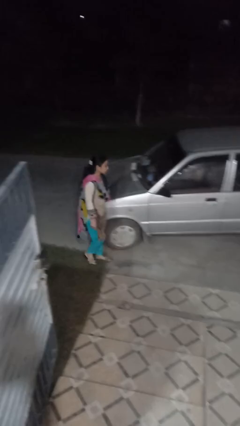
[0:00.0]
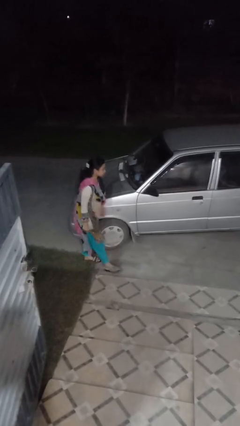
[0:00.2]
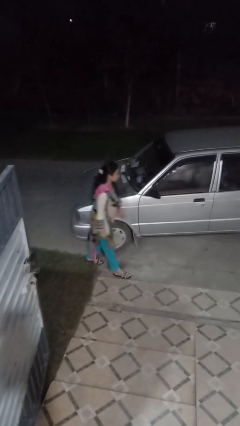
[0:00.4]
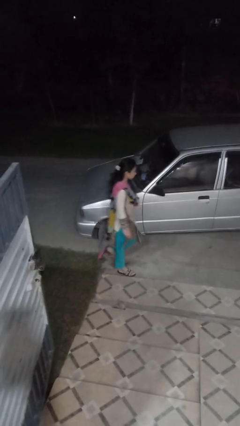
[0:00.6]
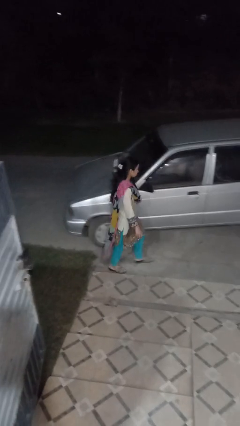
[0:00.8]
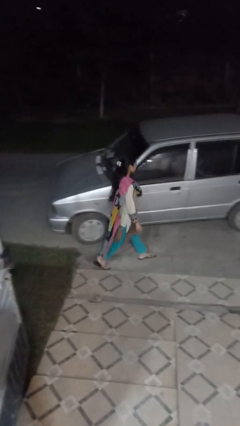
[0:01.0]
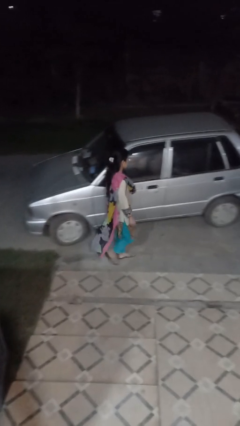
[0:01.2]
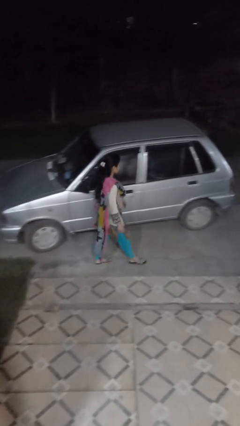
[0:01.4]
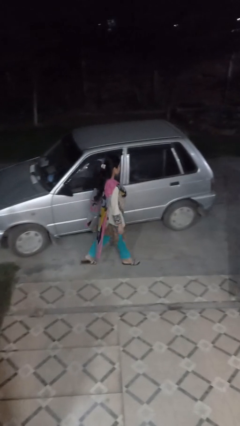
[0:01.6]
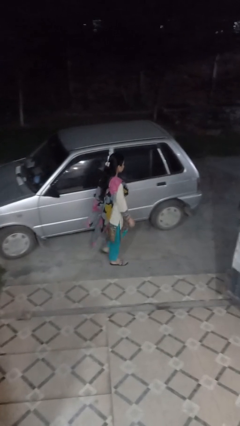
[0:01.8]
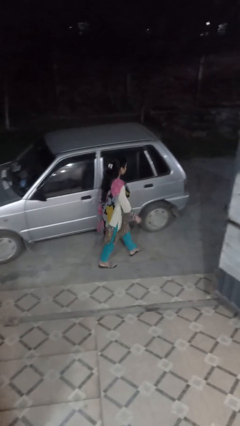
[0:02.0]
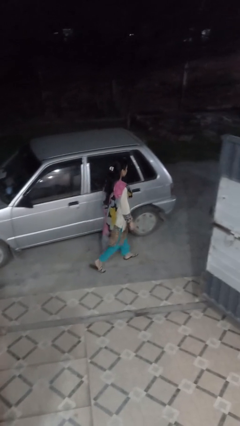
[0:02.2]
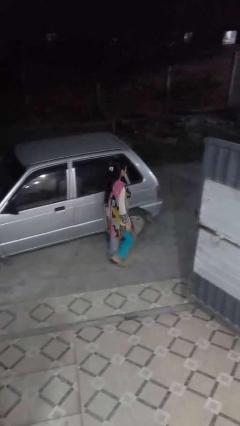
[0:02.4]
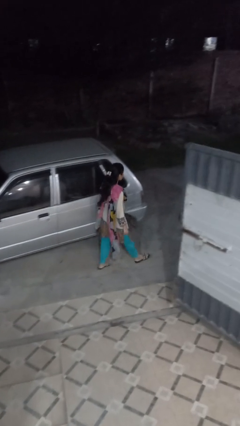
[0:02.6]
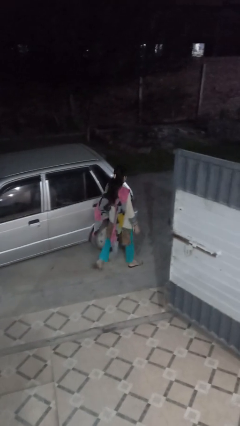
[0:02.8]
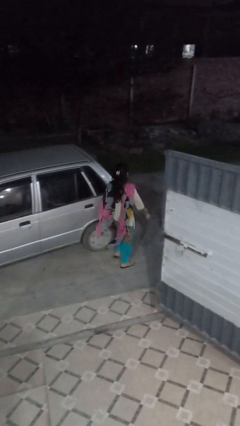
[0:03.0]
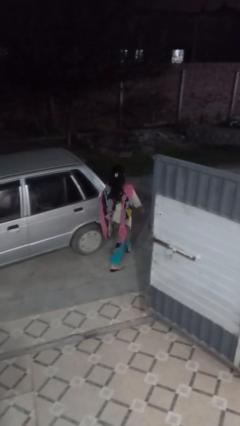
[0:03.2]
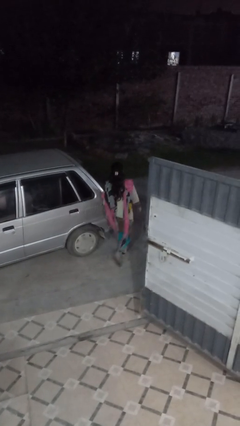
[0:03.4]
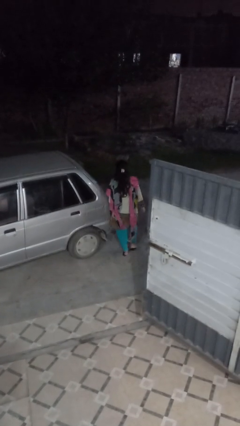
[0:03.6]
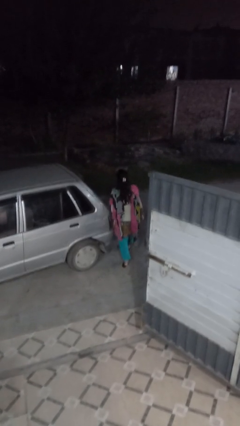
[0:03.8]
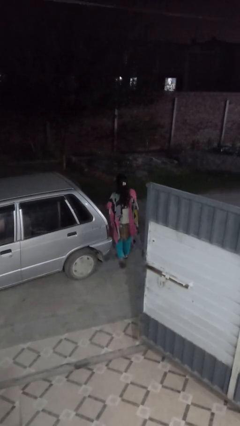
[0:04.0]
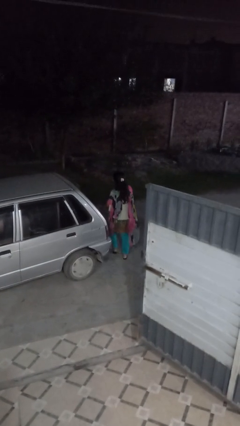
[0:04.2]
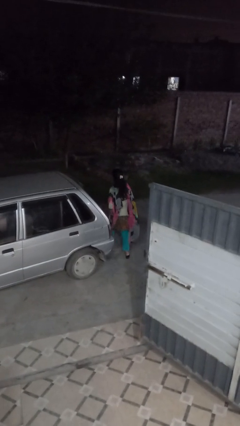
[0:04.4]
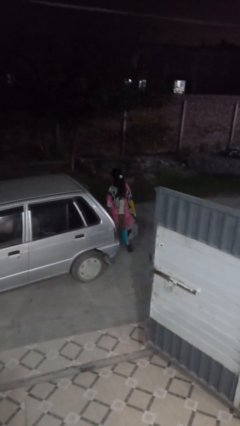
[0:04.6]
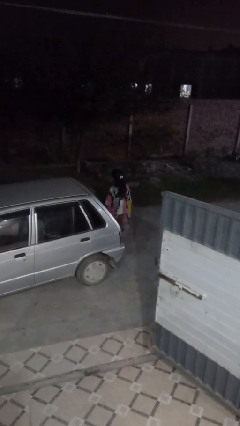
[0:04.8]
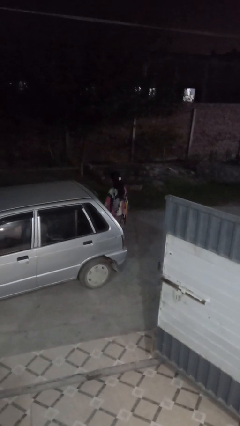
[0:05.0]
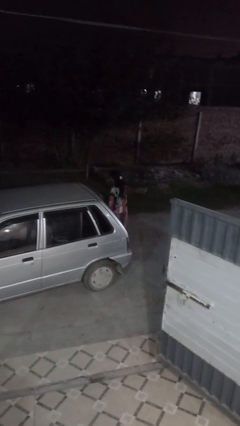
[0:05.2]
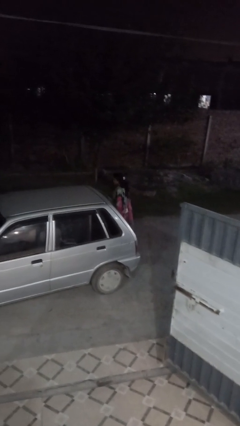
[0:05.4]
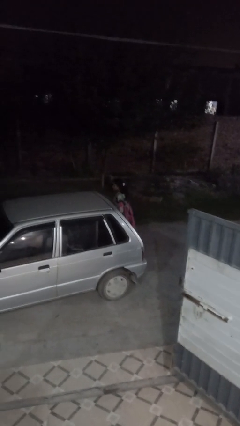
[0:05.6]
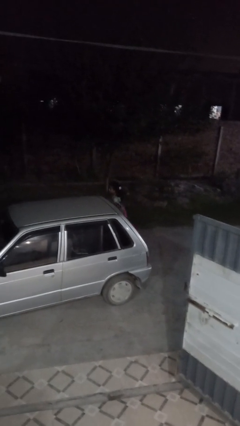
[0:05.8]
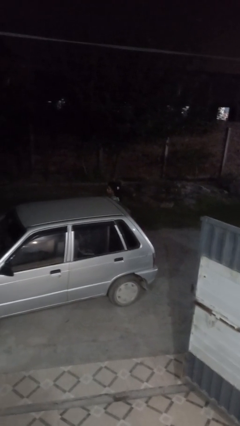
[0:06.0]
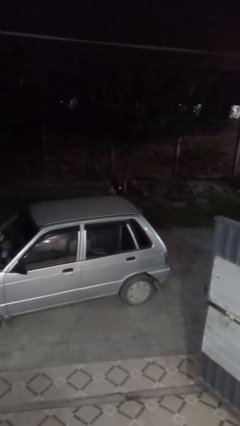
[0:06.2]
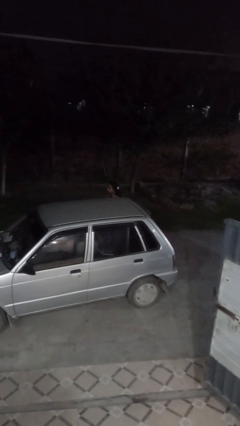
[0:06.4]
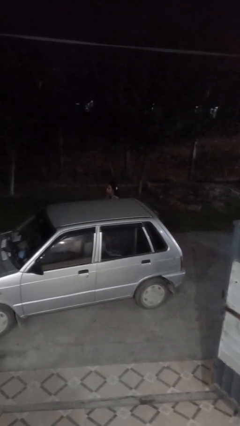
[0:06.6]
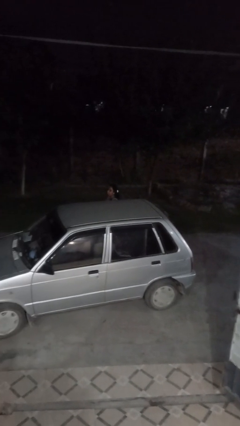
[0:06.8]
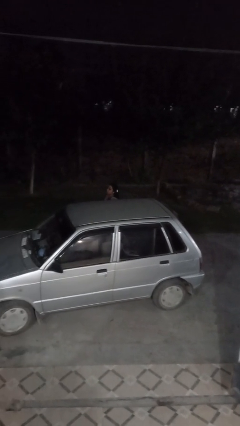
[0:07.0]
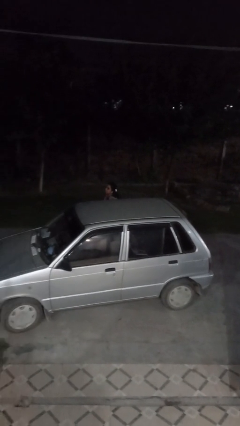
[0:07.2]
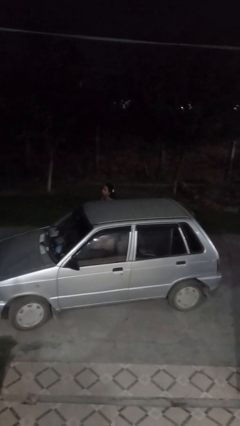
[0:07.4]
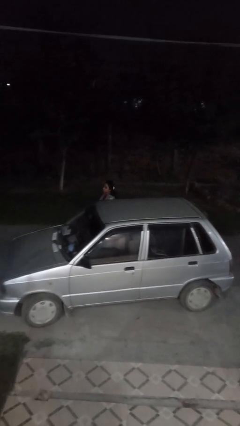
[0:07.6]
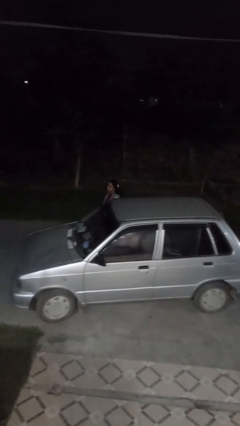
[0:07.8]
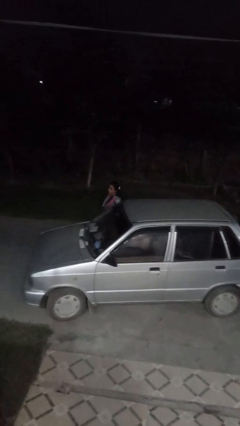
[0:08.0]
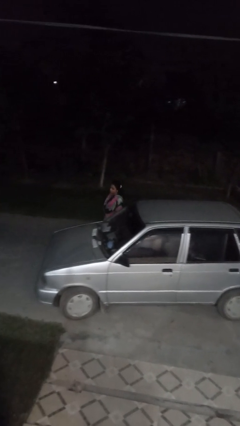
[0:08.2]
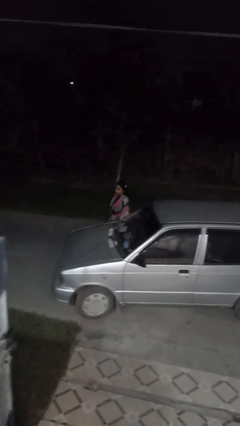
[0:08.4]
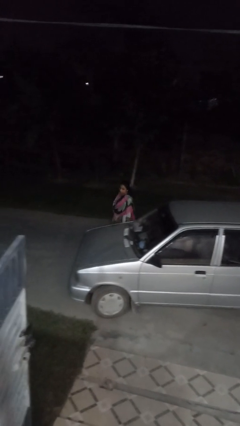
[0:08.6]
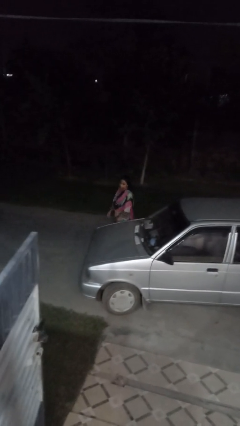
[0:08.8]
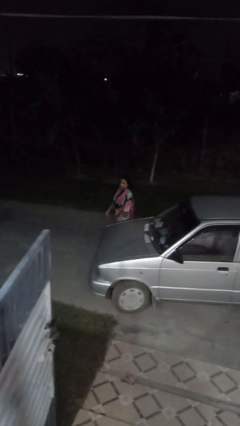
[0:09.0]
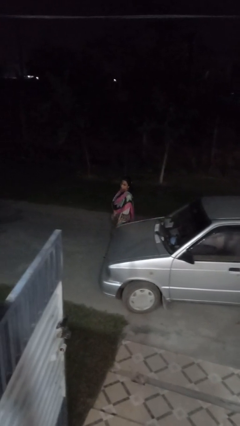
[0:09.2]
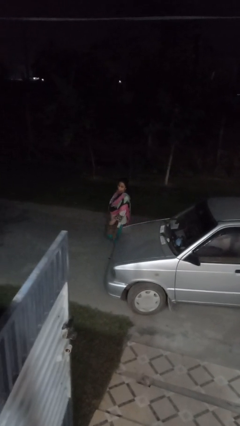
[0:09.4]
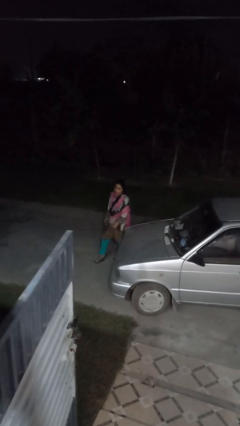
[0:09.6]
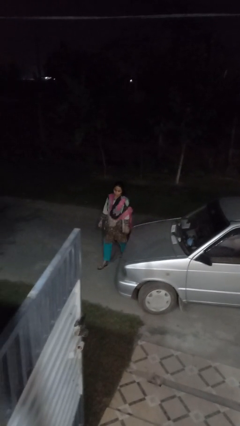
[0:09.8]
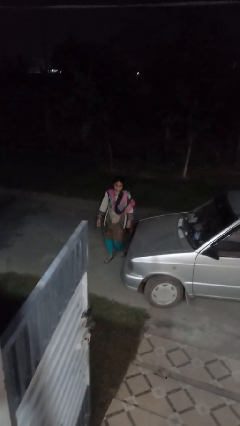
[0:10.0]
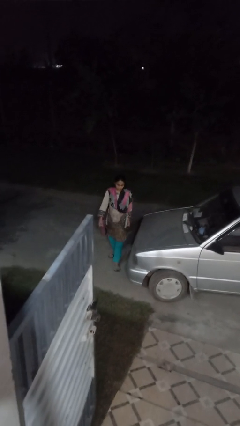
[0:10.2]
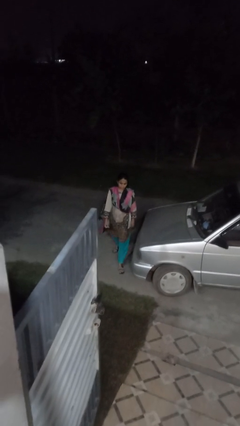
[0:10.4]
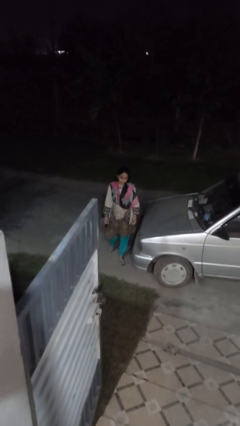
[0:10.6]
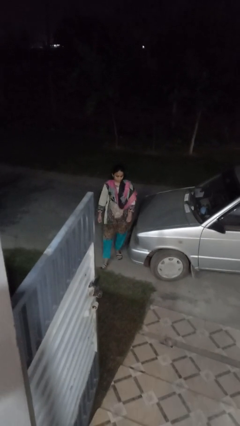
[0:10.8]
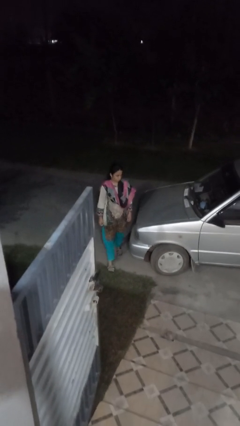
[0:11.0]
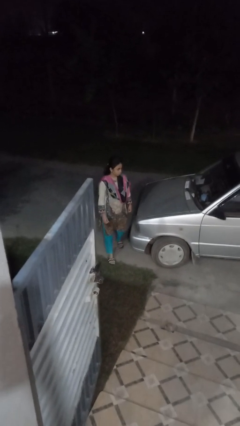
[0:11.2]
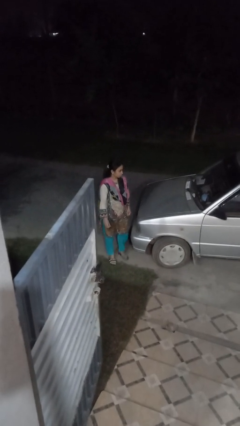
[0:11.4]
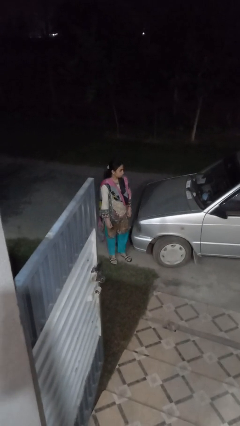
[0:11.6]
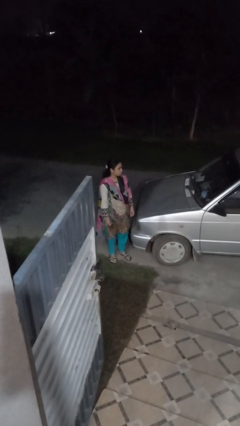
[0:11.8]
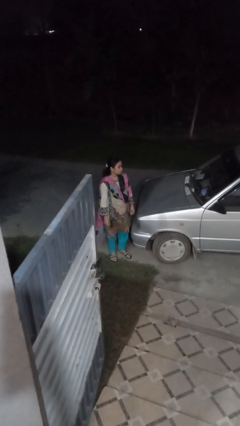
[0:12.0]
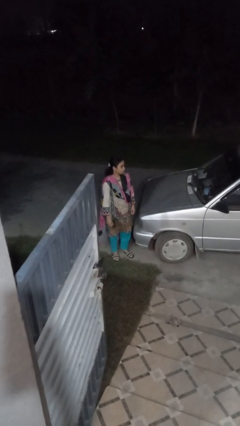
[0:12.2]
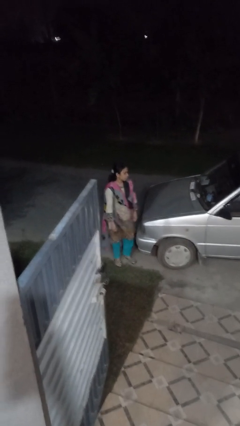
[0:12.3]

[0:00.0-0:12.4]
person walks around car

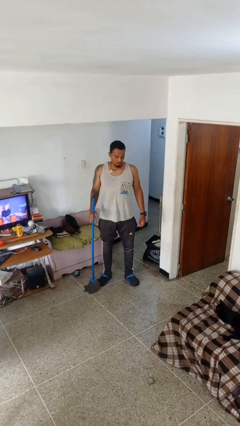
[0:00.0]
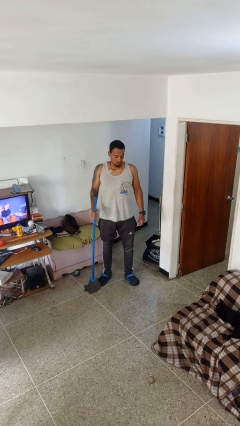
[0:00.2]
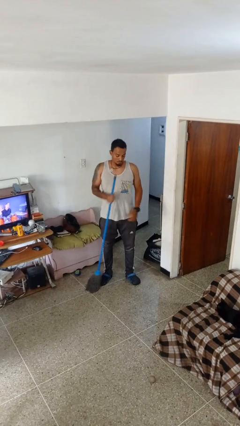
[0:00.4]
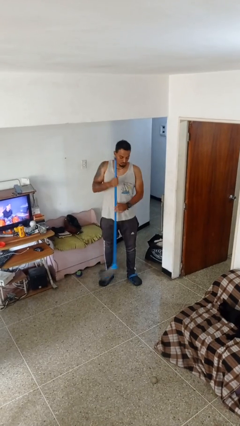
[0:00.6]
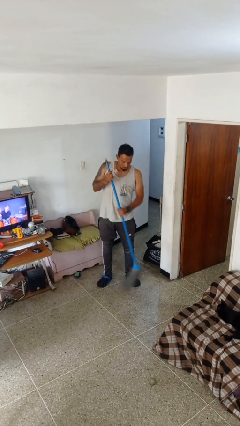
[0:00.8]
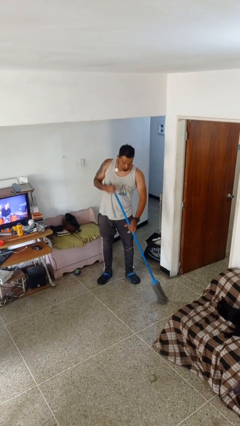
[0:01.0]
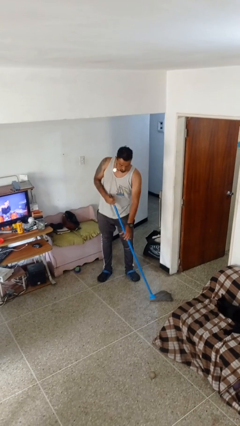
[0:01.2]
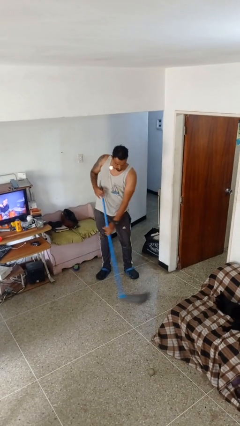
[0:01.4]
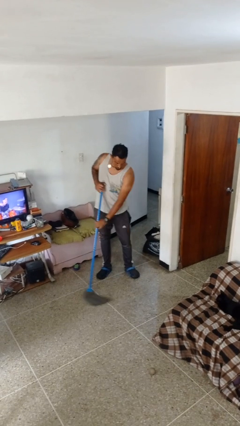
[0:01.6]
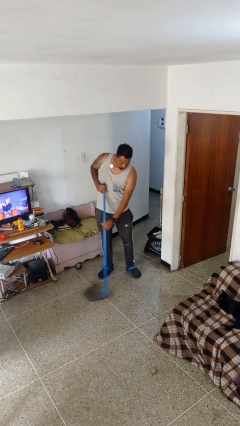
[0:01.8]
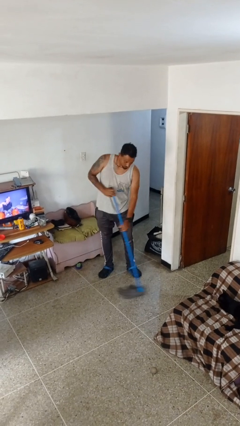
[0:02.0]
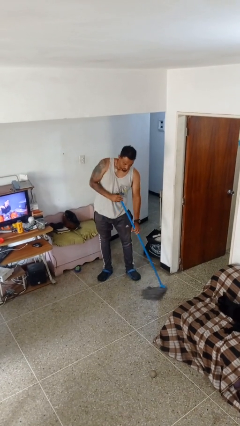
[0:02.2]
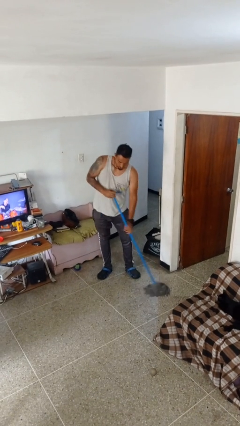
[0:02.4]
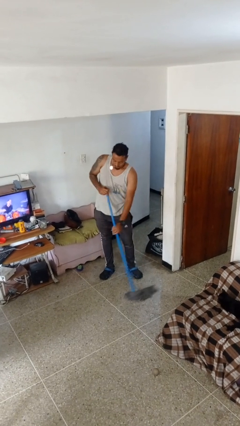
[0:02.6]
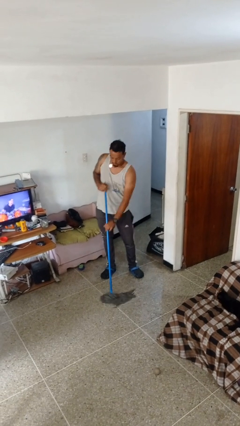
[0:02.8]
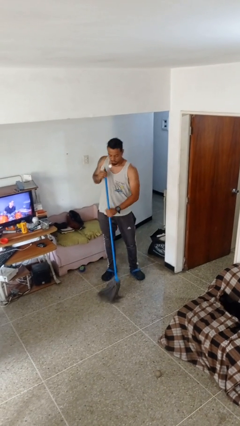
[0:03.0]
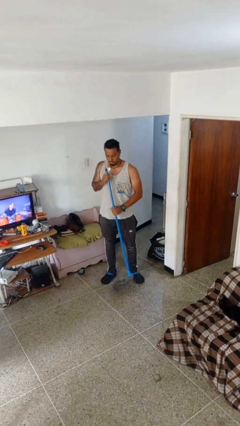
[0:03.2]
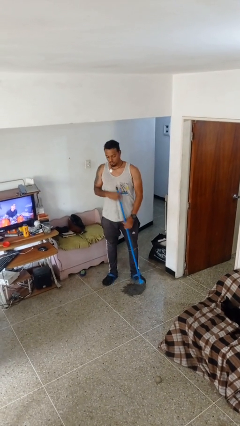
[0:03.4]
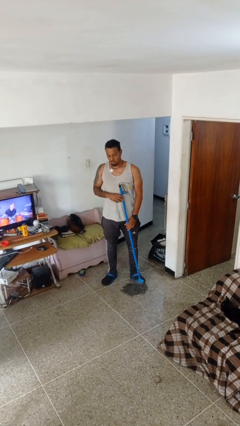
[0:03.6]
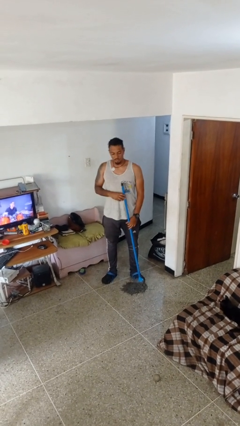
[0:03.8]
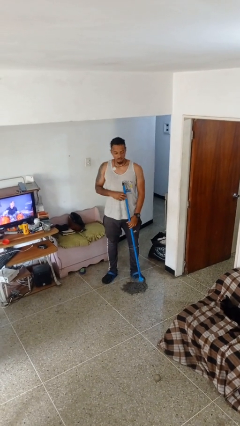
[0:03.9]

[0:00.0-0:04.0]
person mops

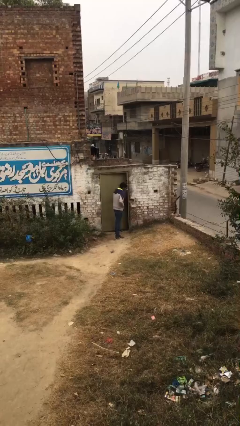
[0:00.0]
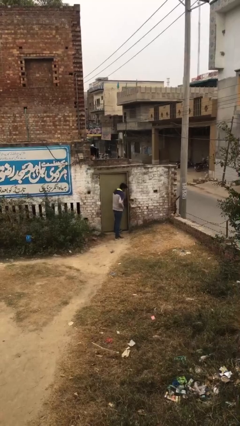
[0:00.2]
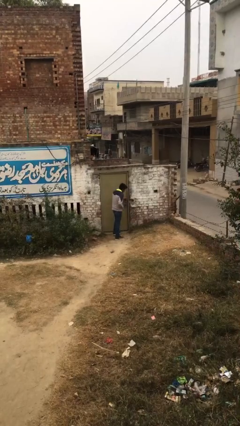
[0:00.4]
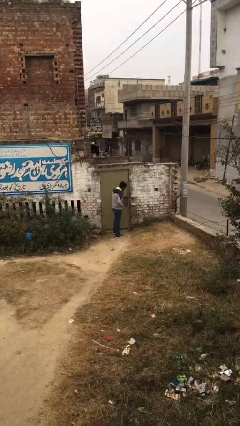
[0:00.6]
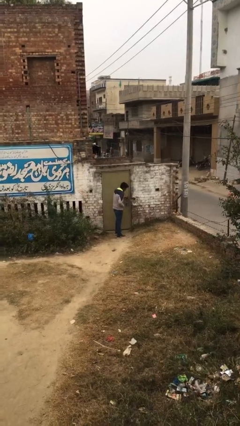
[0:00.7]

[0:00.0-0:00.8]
person closes facility door

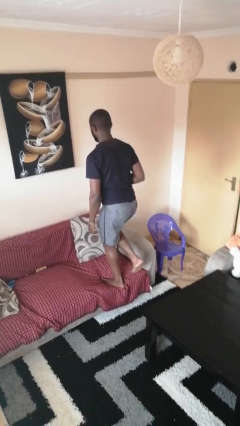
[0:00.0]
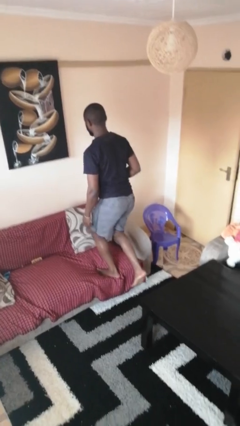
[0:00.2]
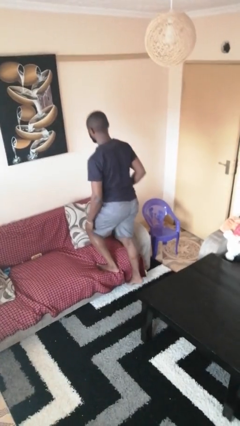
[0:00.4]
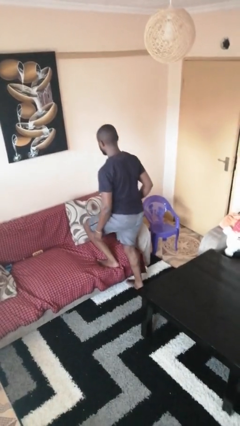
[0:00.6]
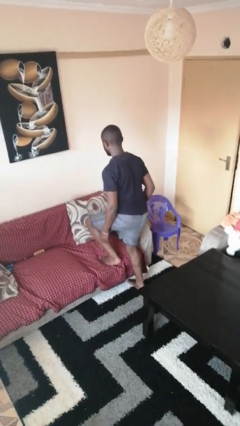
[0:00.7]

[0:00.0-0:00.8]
person climbs on couch

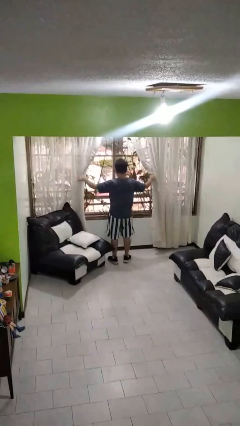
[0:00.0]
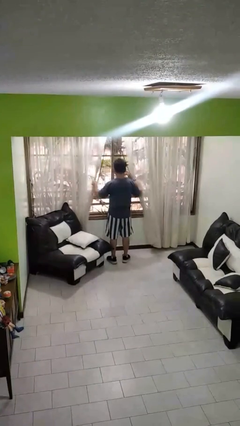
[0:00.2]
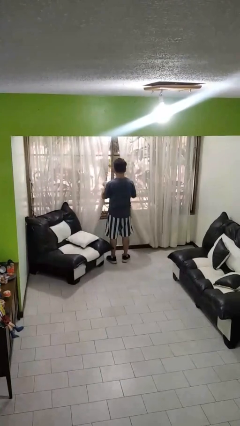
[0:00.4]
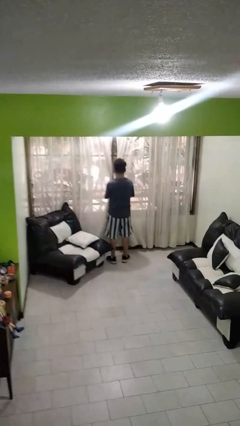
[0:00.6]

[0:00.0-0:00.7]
person closes curtains
